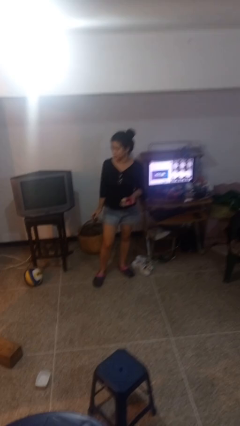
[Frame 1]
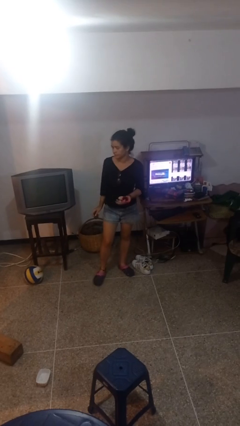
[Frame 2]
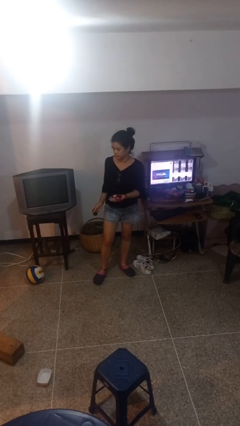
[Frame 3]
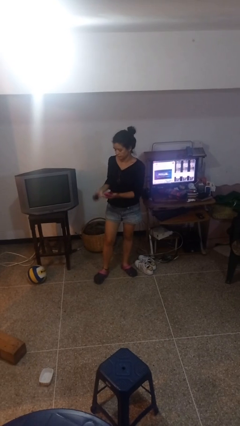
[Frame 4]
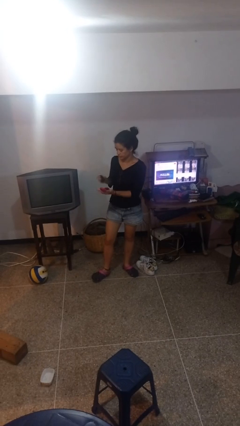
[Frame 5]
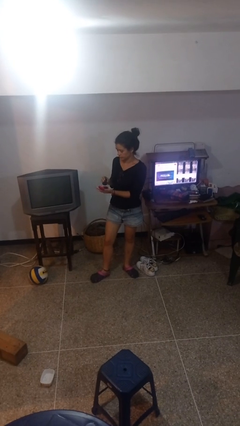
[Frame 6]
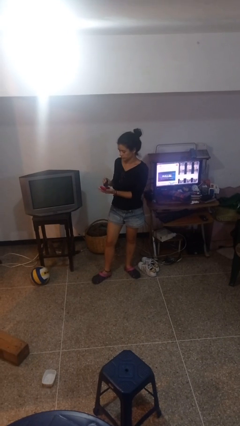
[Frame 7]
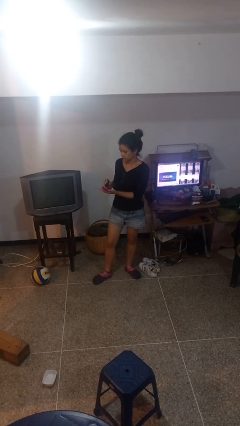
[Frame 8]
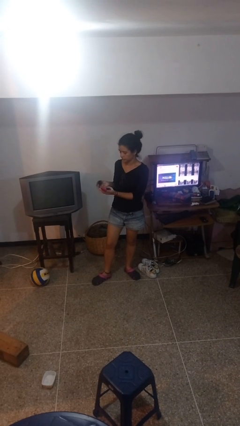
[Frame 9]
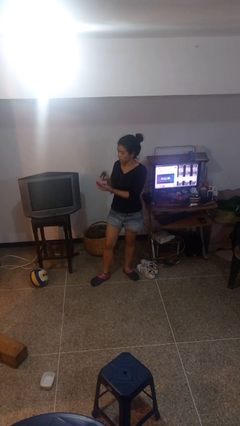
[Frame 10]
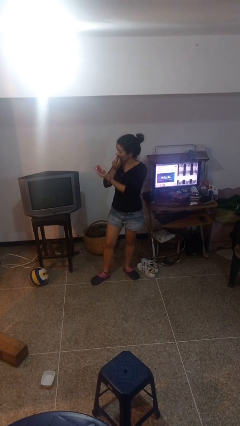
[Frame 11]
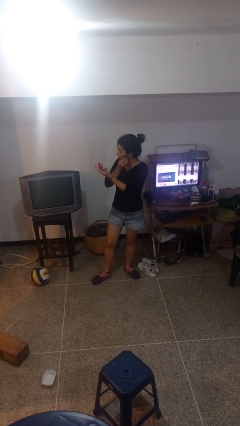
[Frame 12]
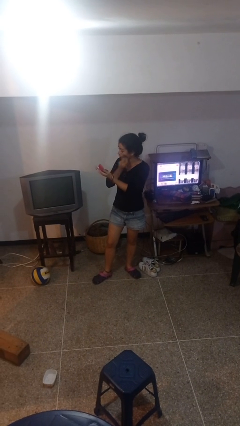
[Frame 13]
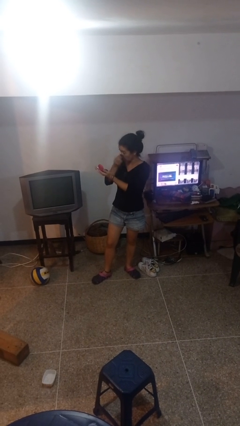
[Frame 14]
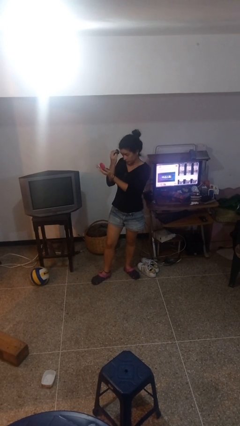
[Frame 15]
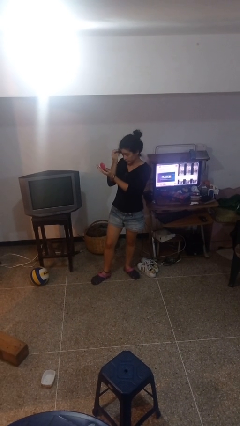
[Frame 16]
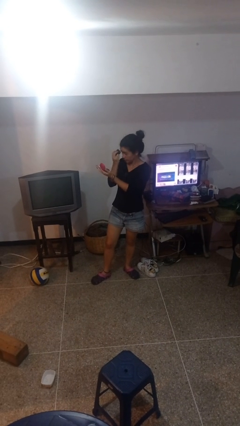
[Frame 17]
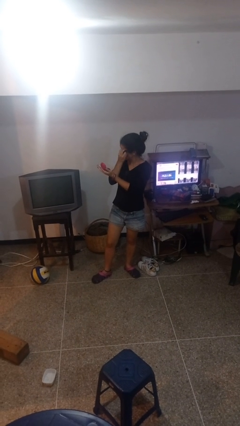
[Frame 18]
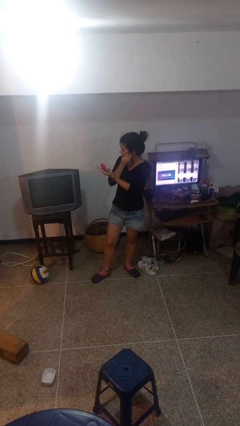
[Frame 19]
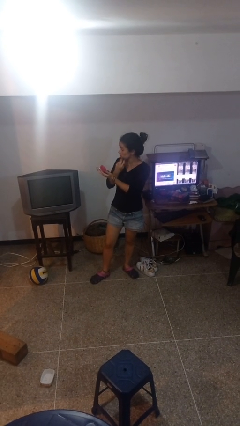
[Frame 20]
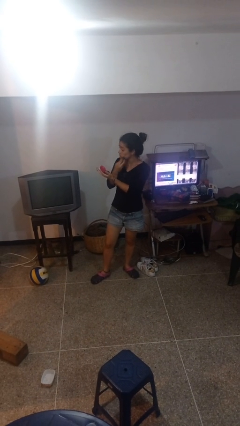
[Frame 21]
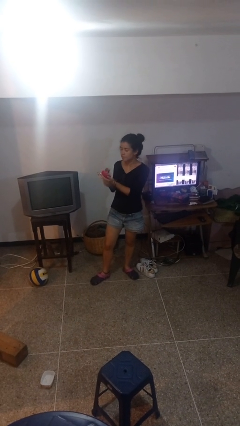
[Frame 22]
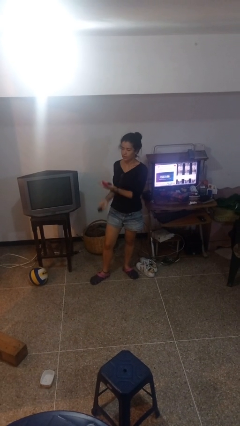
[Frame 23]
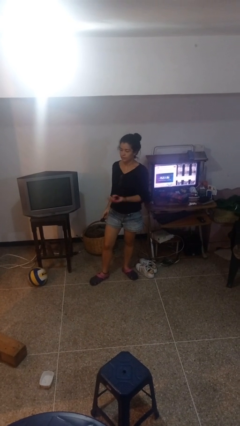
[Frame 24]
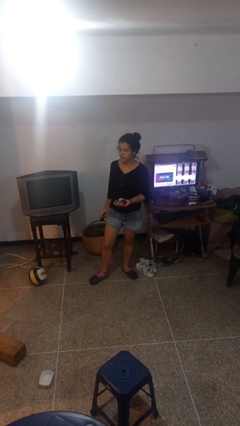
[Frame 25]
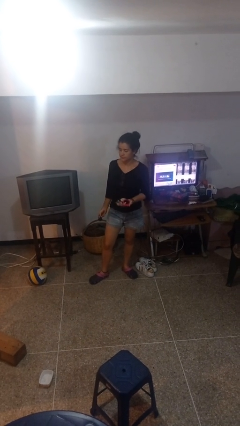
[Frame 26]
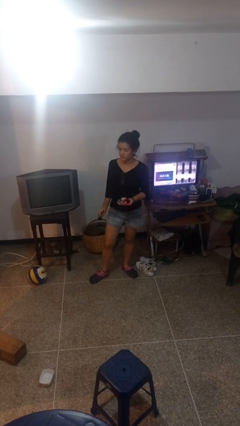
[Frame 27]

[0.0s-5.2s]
person applies foundation makeup

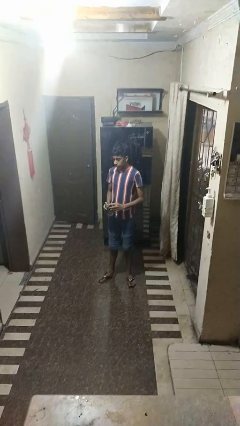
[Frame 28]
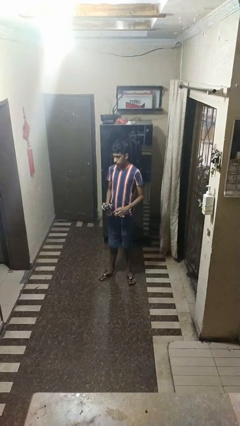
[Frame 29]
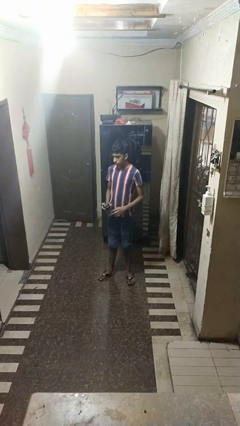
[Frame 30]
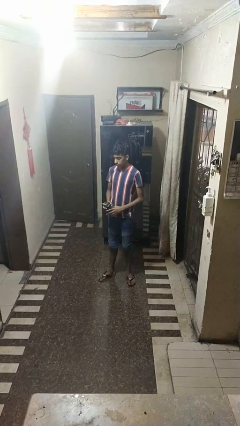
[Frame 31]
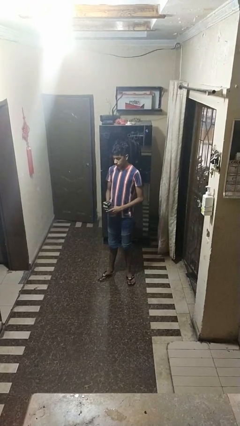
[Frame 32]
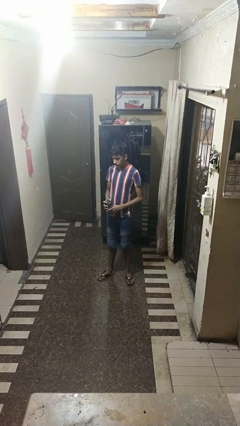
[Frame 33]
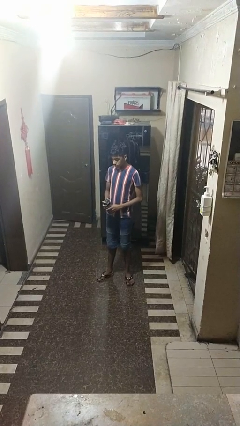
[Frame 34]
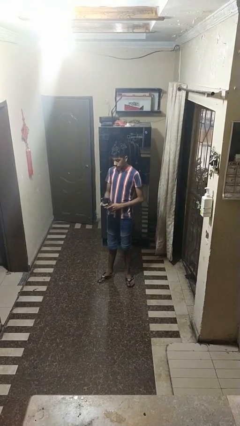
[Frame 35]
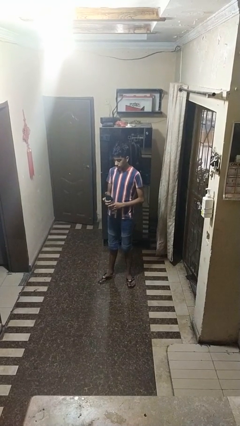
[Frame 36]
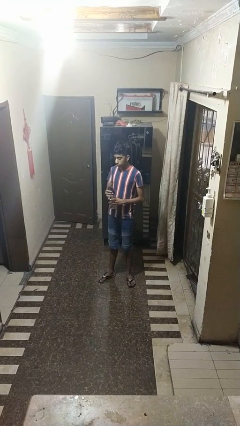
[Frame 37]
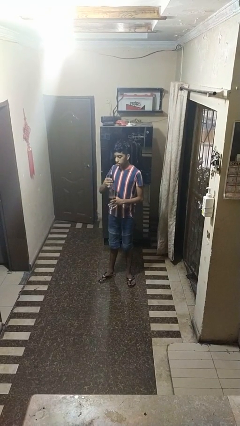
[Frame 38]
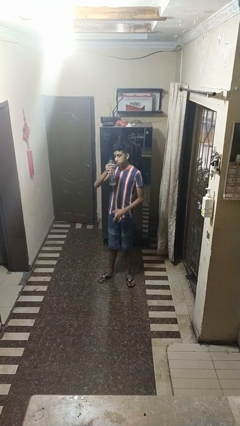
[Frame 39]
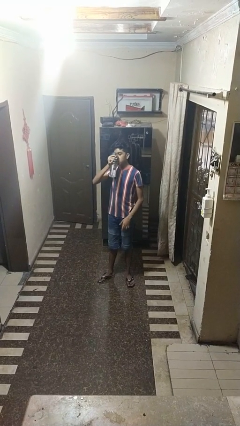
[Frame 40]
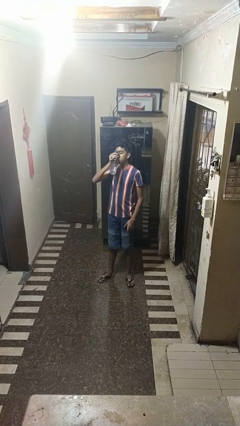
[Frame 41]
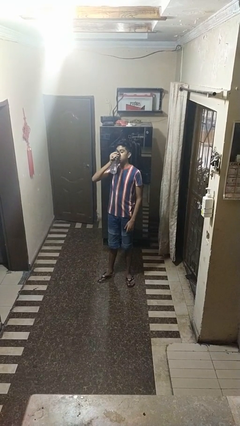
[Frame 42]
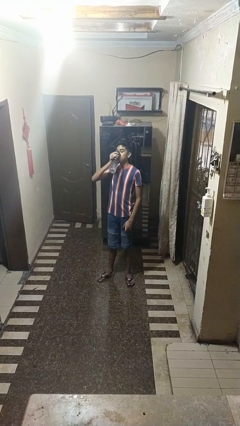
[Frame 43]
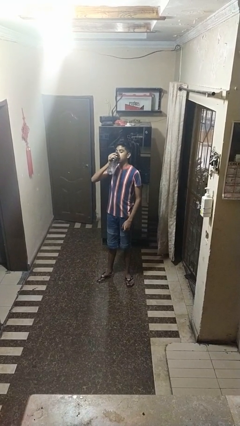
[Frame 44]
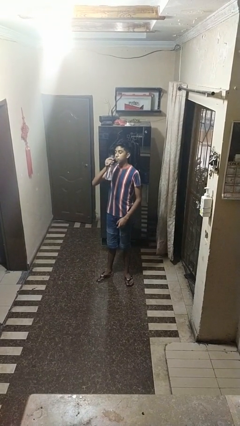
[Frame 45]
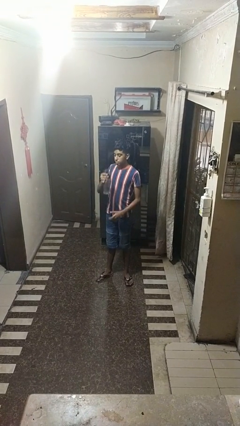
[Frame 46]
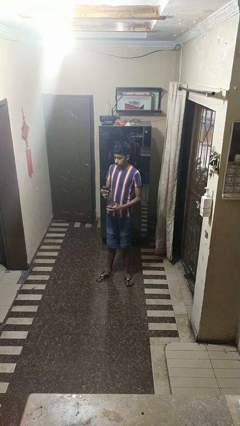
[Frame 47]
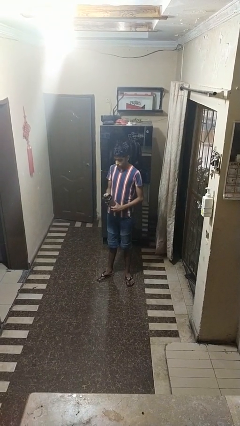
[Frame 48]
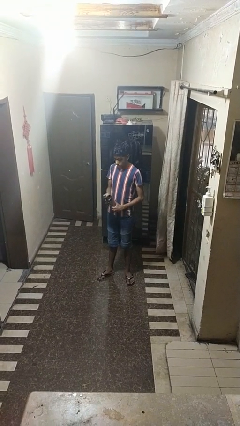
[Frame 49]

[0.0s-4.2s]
person drinks from bottle

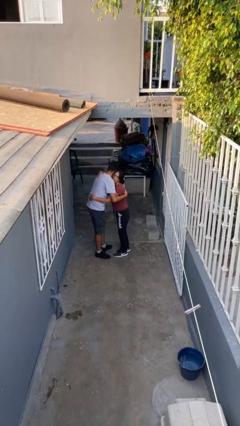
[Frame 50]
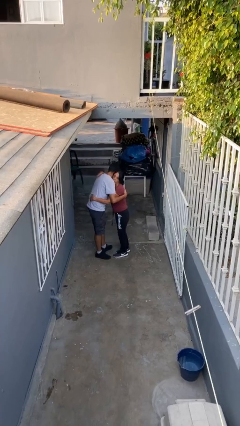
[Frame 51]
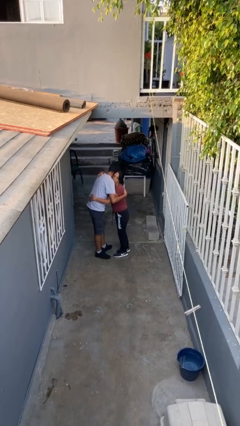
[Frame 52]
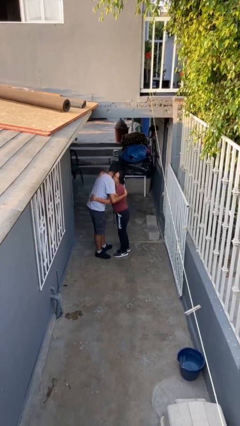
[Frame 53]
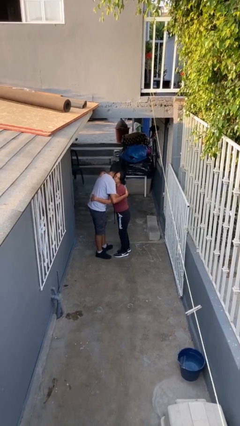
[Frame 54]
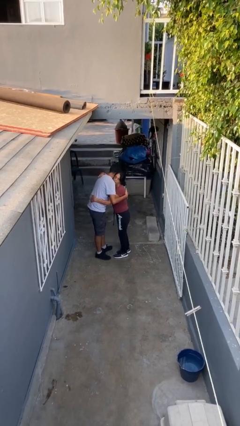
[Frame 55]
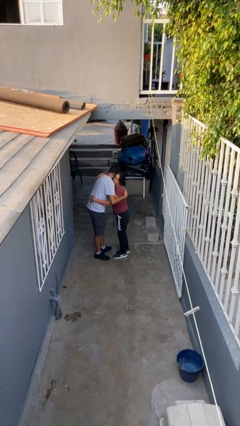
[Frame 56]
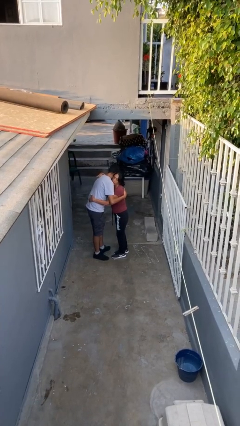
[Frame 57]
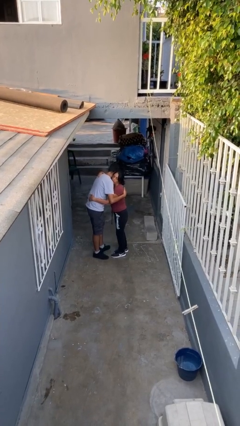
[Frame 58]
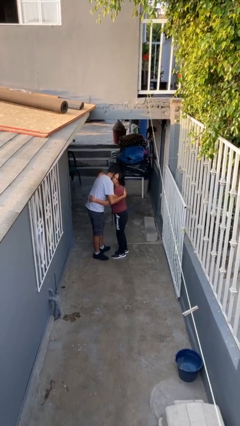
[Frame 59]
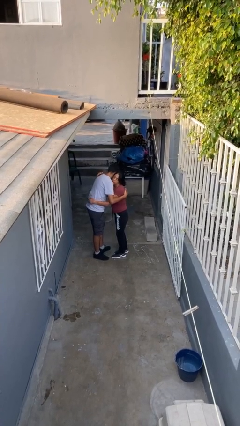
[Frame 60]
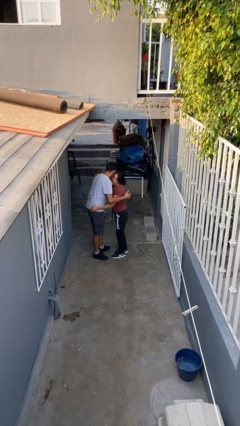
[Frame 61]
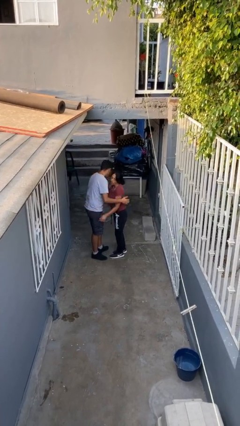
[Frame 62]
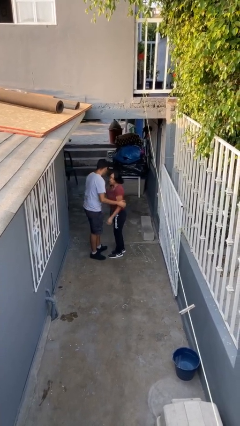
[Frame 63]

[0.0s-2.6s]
person embraces person

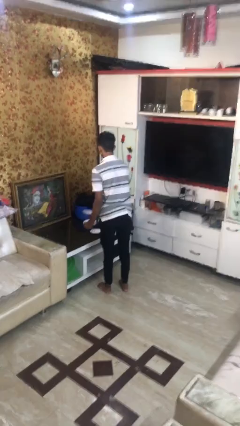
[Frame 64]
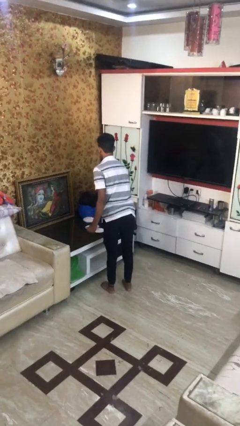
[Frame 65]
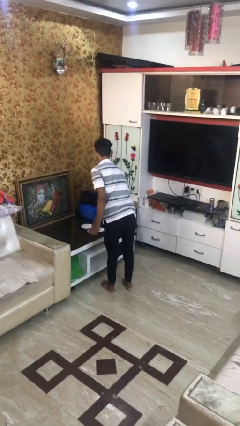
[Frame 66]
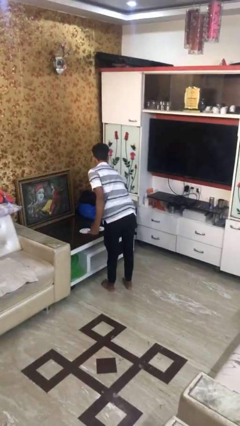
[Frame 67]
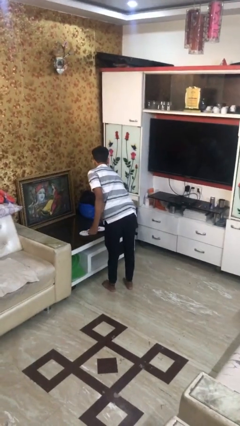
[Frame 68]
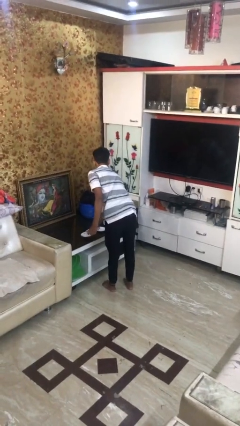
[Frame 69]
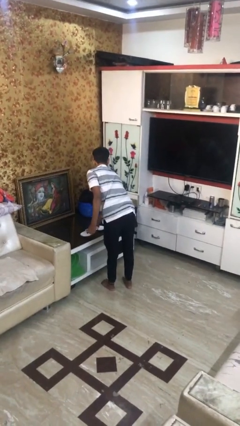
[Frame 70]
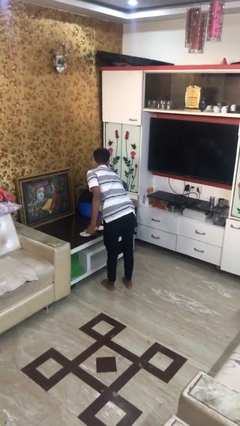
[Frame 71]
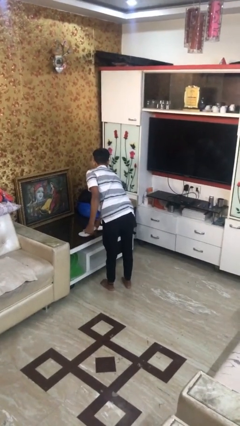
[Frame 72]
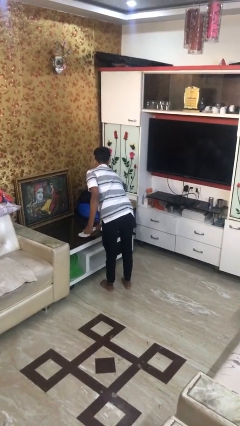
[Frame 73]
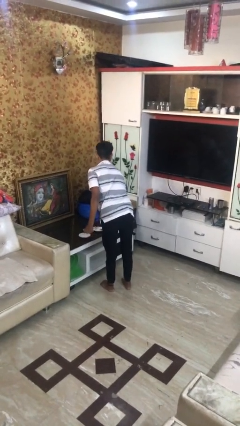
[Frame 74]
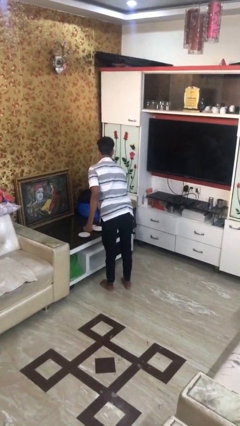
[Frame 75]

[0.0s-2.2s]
person sets table

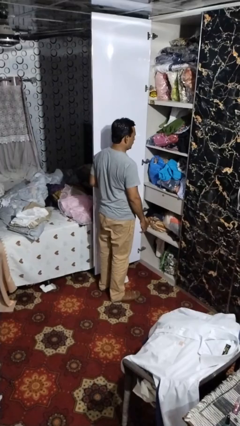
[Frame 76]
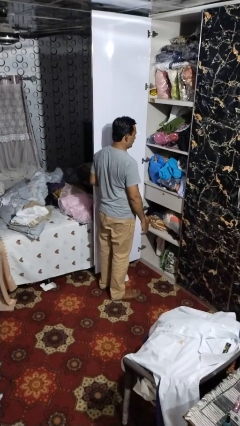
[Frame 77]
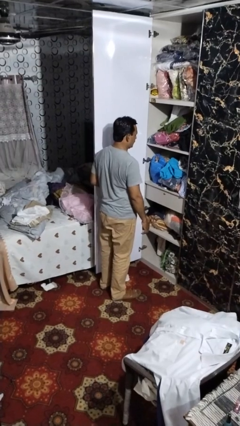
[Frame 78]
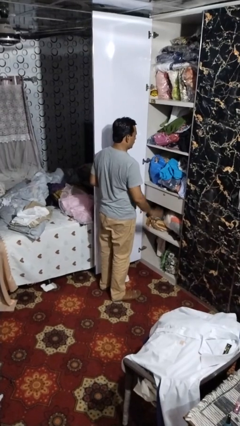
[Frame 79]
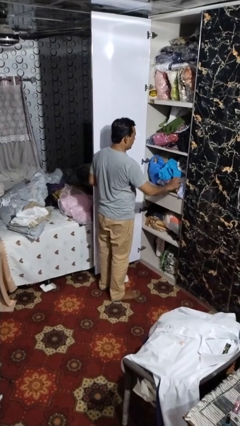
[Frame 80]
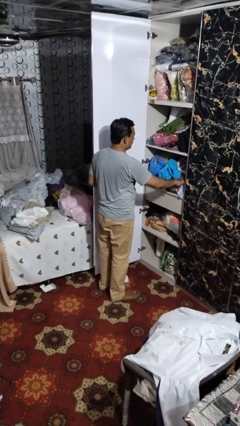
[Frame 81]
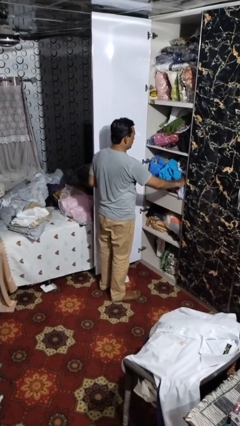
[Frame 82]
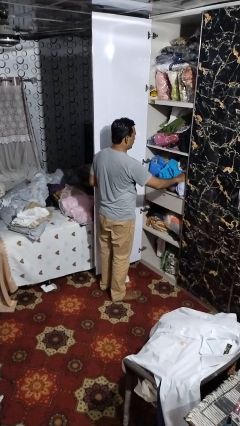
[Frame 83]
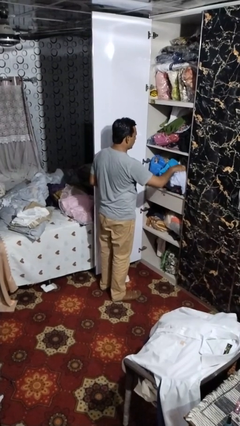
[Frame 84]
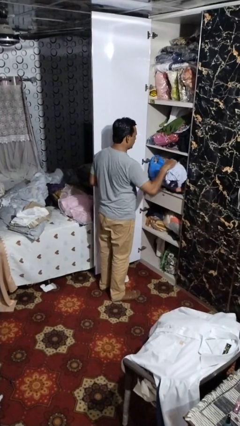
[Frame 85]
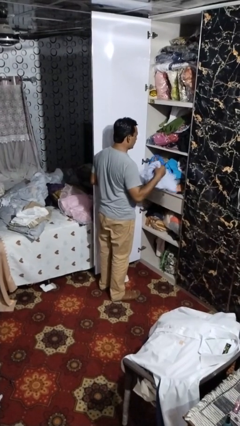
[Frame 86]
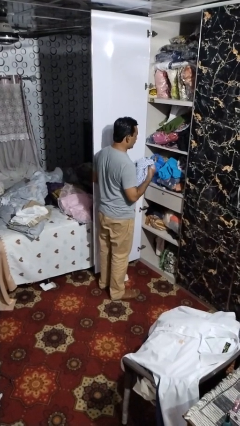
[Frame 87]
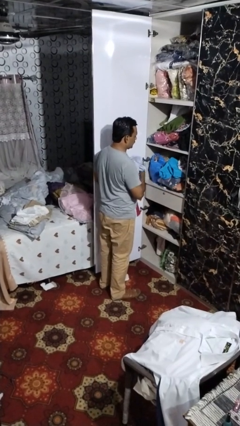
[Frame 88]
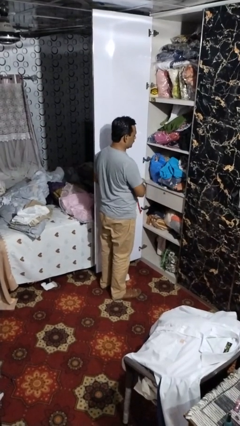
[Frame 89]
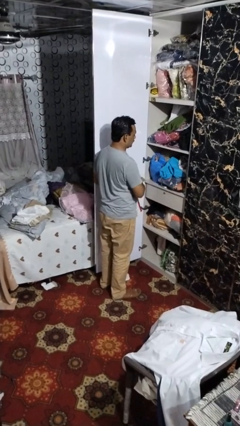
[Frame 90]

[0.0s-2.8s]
person takes clothes from dresser

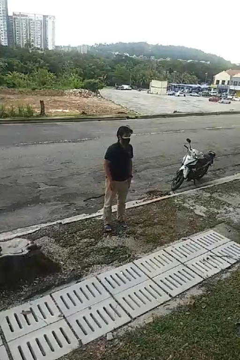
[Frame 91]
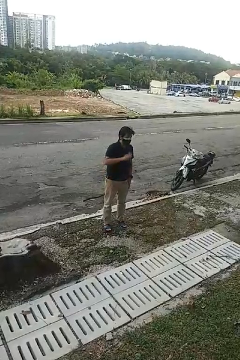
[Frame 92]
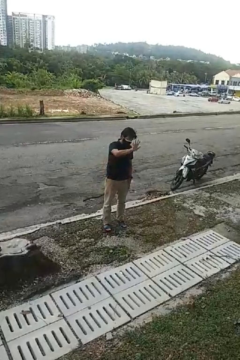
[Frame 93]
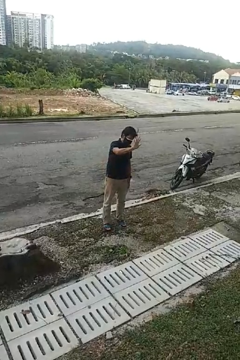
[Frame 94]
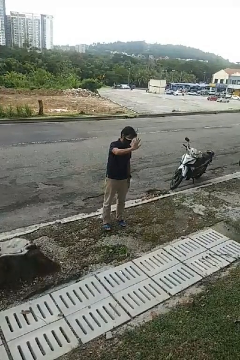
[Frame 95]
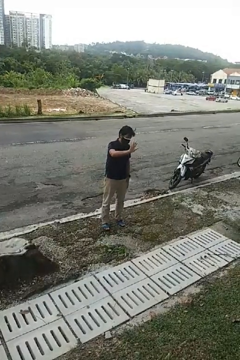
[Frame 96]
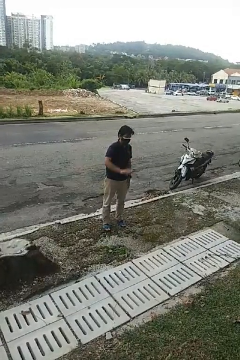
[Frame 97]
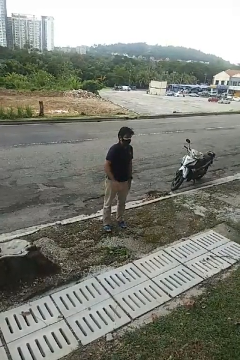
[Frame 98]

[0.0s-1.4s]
person gestures number five
